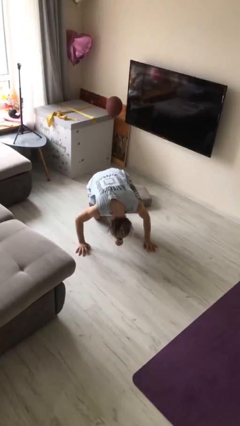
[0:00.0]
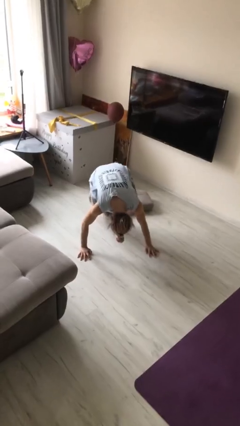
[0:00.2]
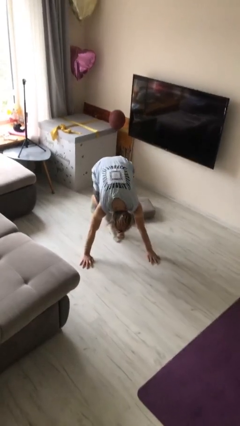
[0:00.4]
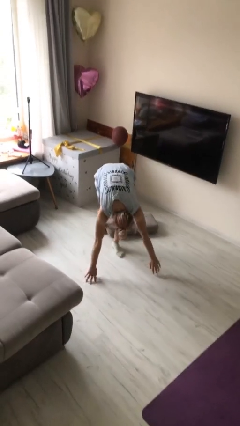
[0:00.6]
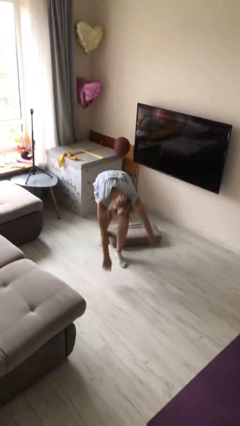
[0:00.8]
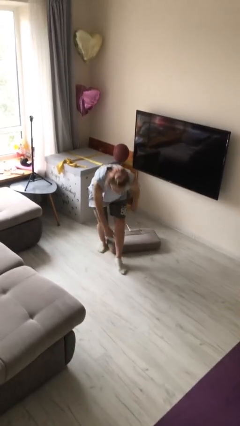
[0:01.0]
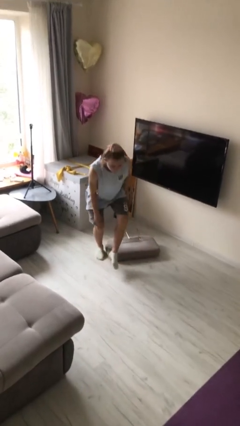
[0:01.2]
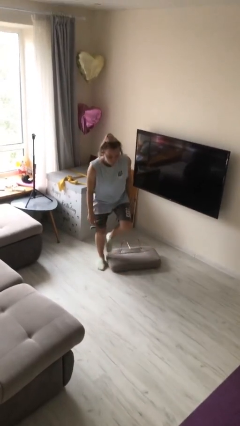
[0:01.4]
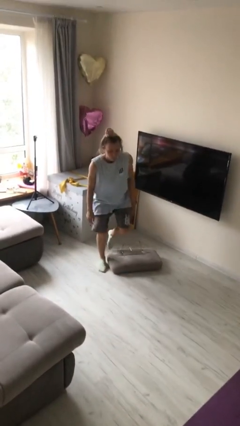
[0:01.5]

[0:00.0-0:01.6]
person stands up from floor

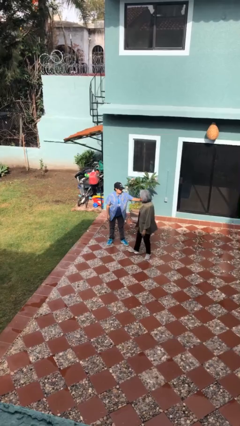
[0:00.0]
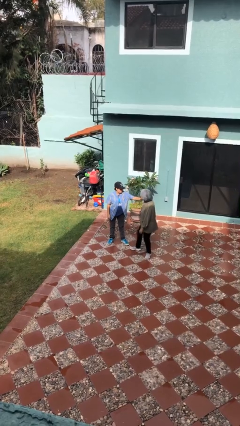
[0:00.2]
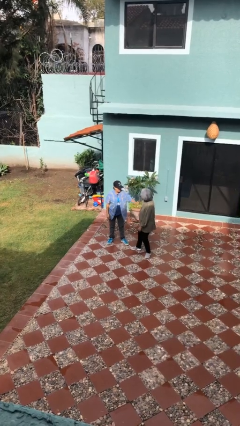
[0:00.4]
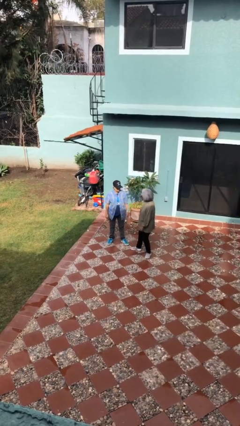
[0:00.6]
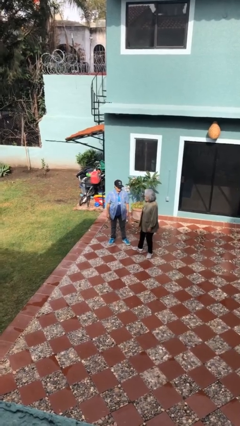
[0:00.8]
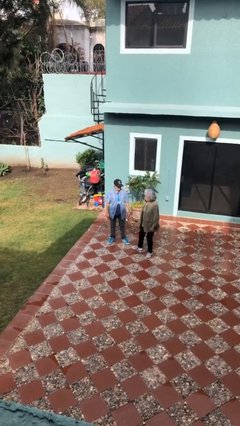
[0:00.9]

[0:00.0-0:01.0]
person spins person around

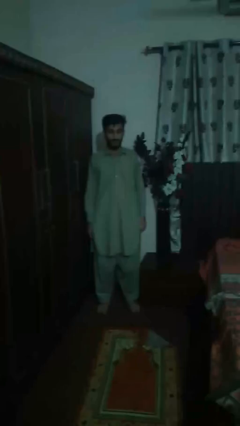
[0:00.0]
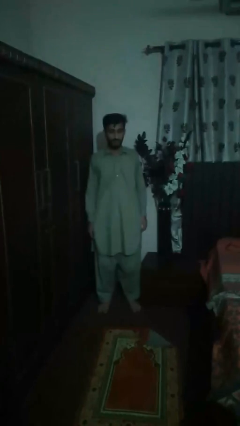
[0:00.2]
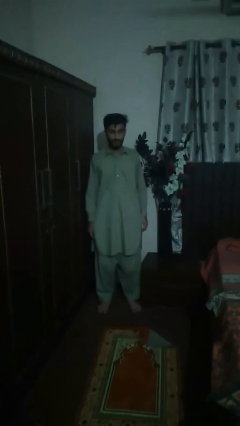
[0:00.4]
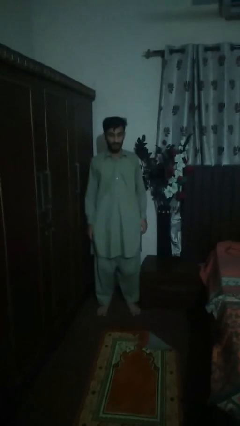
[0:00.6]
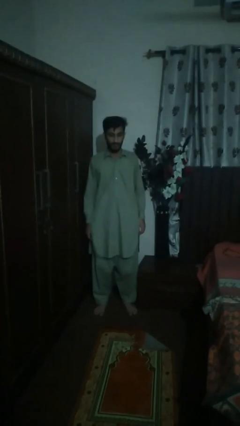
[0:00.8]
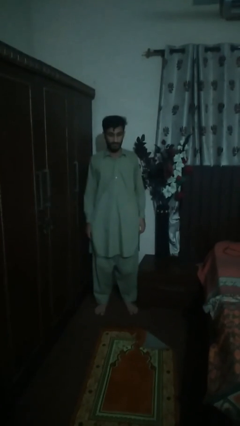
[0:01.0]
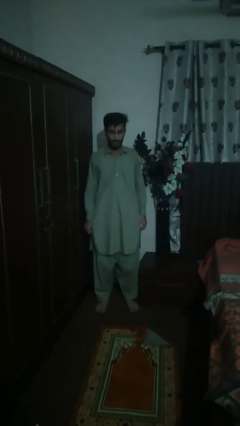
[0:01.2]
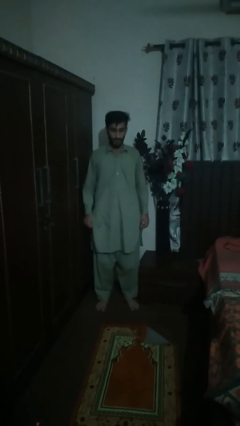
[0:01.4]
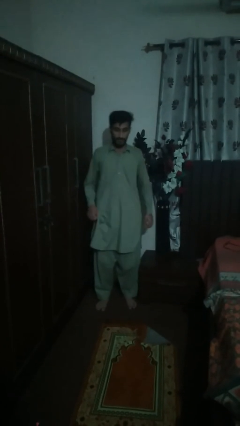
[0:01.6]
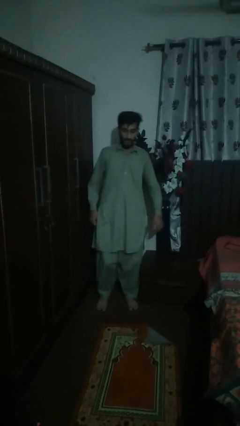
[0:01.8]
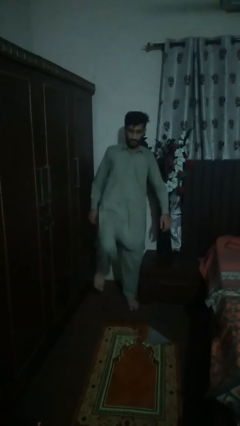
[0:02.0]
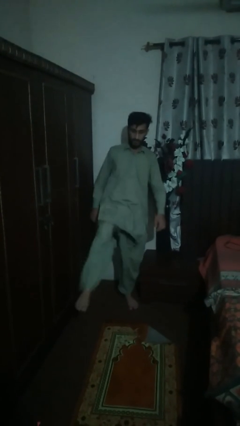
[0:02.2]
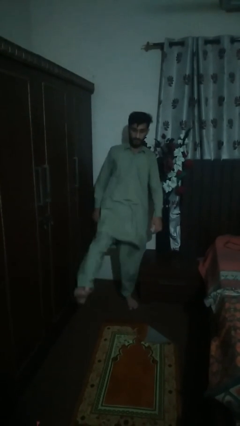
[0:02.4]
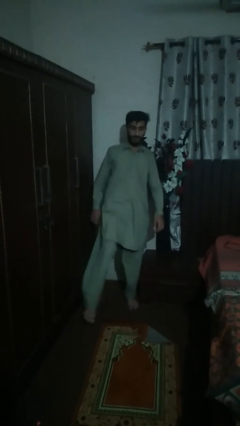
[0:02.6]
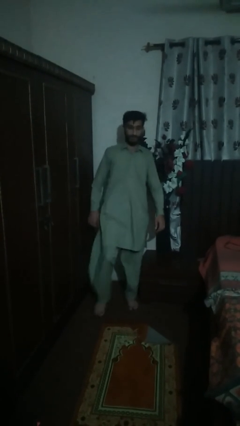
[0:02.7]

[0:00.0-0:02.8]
person karate kicks

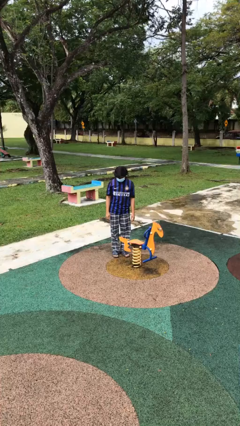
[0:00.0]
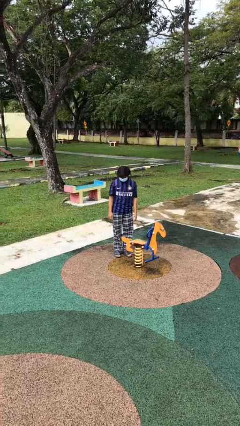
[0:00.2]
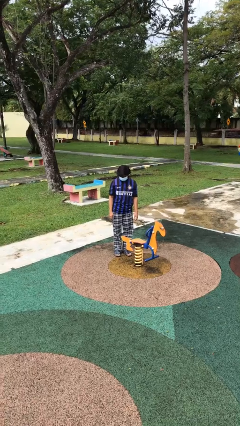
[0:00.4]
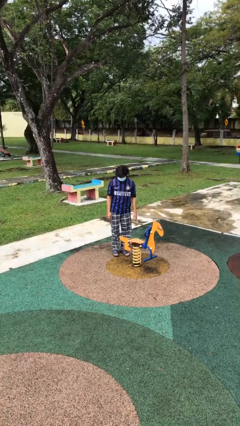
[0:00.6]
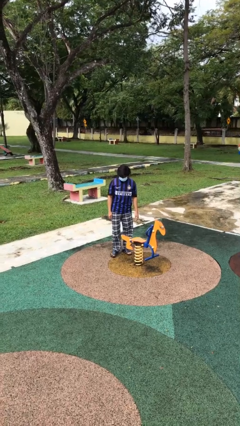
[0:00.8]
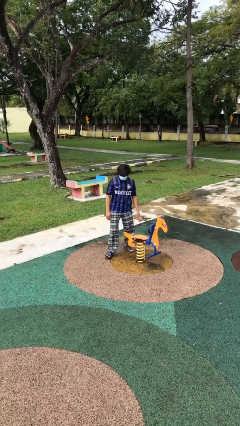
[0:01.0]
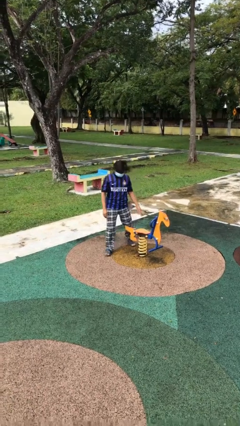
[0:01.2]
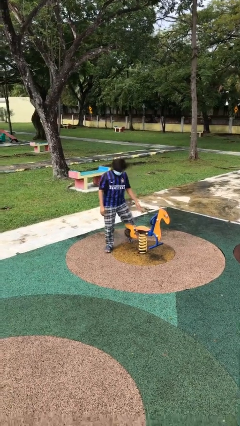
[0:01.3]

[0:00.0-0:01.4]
person trips on object on floor

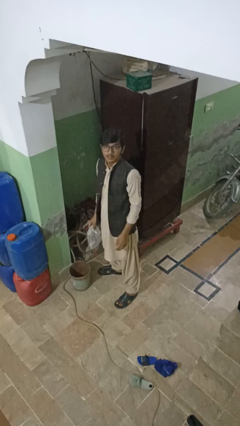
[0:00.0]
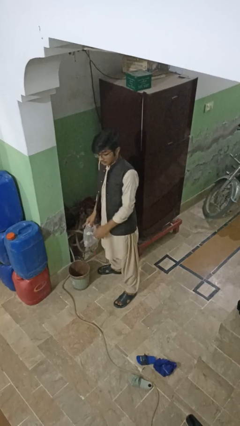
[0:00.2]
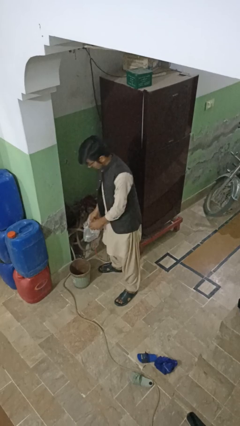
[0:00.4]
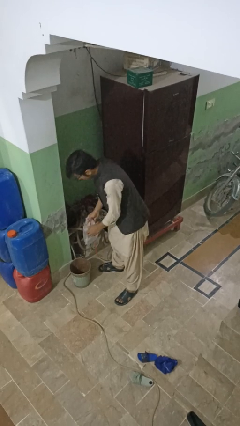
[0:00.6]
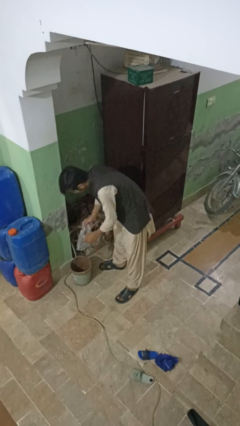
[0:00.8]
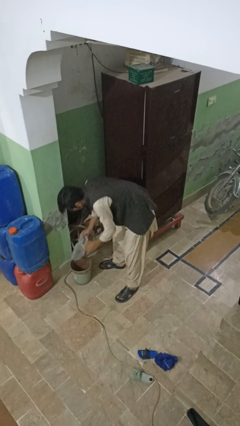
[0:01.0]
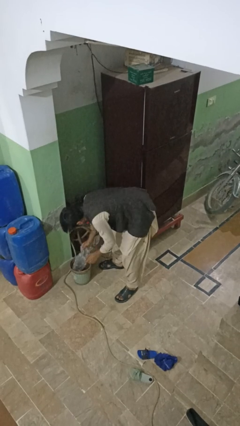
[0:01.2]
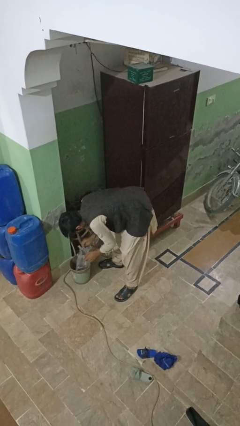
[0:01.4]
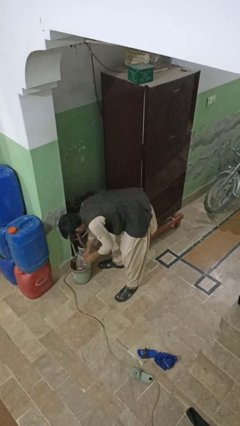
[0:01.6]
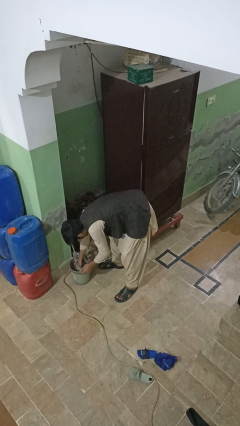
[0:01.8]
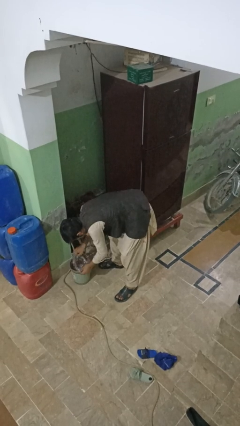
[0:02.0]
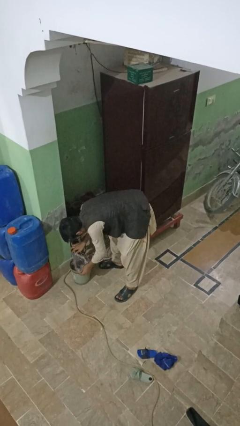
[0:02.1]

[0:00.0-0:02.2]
person inserts trashbag into trashcan

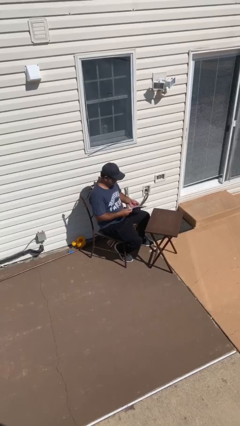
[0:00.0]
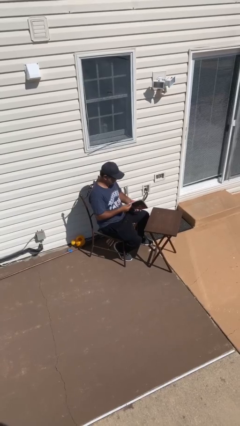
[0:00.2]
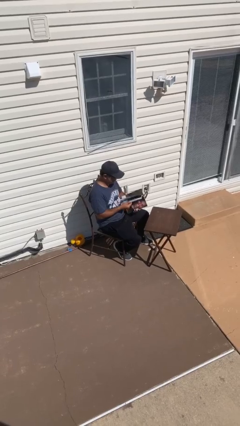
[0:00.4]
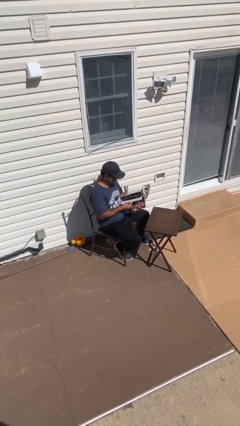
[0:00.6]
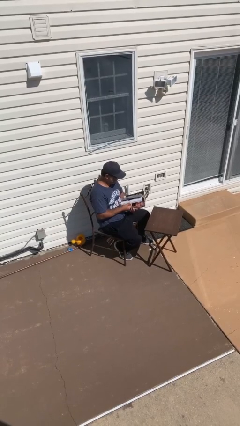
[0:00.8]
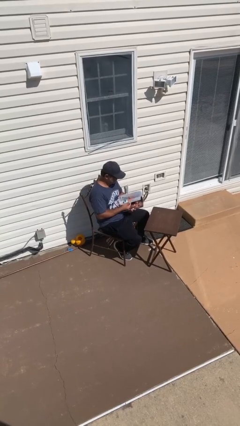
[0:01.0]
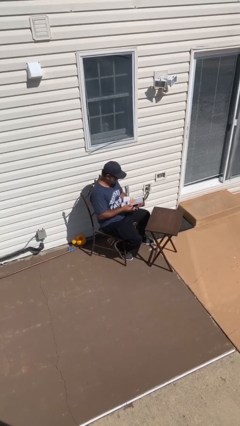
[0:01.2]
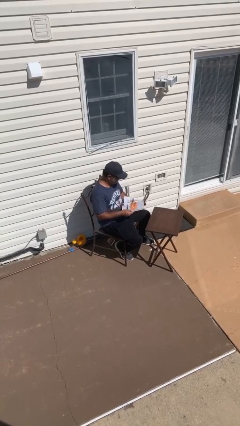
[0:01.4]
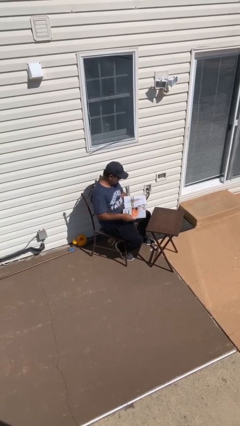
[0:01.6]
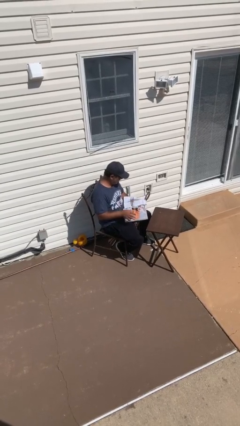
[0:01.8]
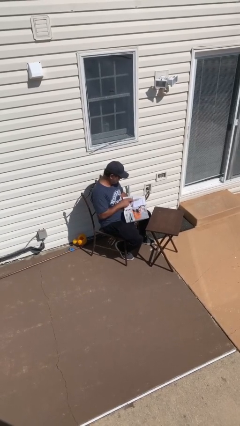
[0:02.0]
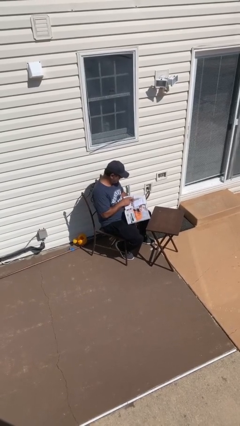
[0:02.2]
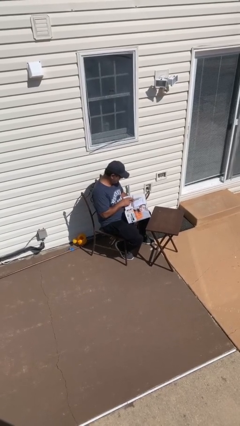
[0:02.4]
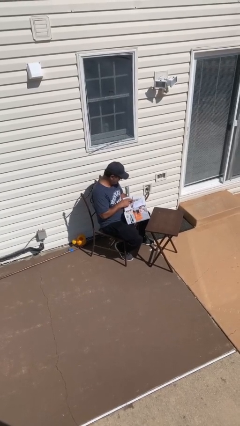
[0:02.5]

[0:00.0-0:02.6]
person reads document

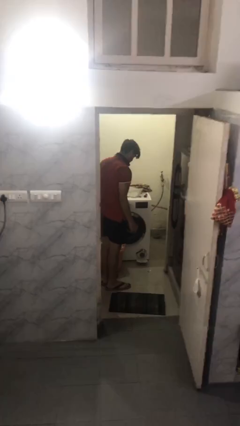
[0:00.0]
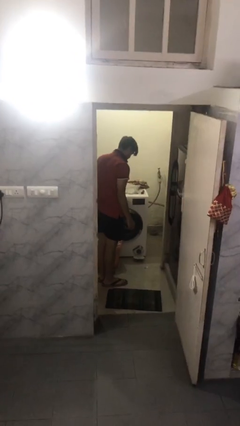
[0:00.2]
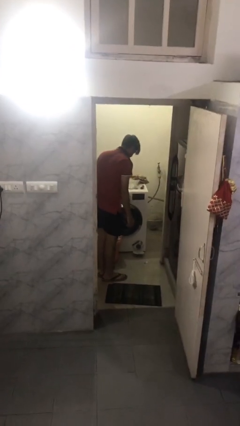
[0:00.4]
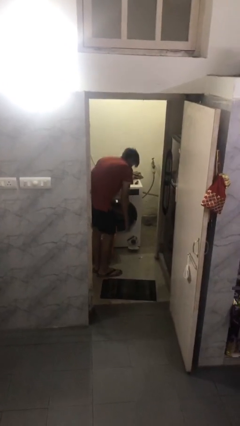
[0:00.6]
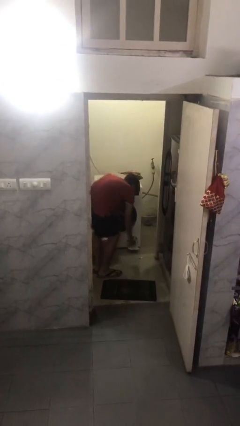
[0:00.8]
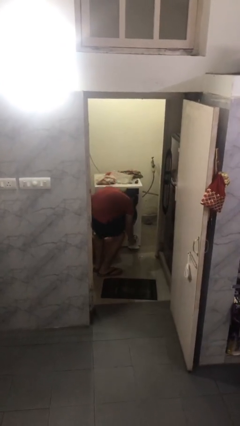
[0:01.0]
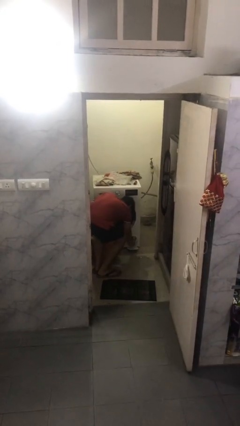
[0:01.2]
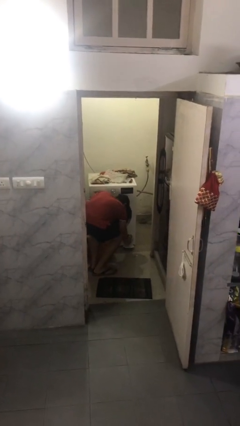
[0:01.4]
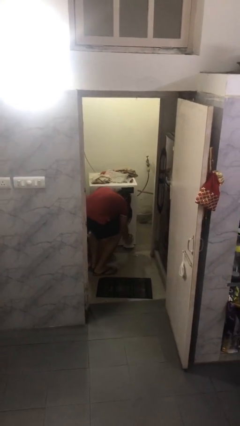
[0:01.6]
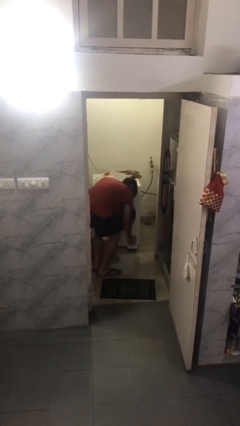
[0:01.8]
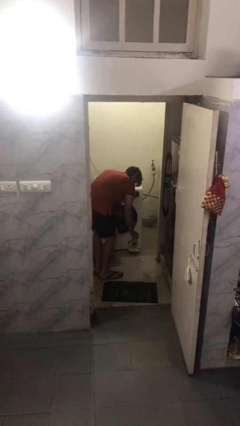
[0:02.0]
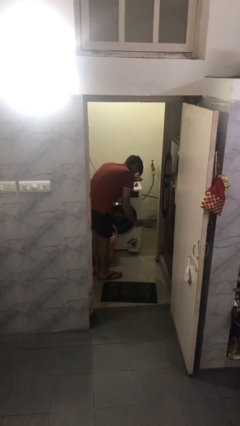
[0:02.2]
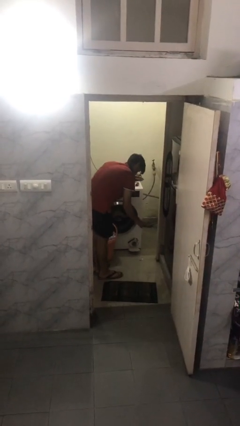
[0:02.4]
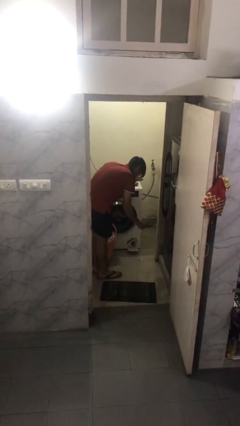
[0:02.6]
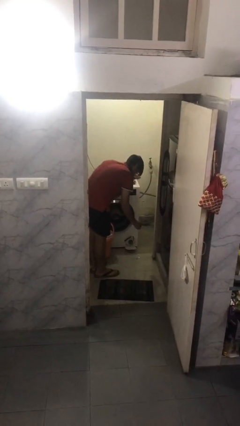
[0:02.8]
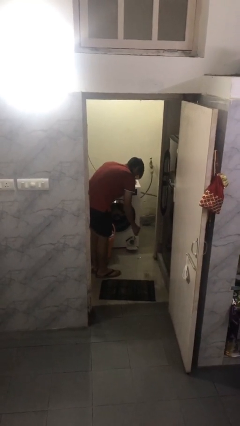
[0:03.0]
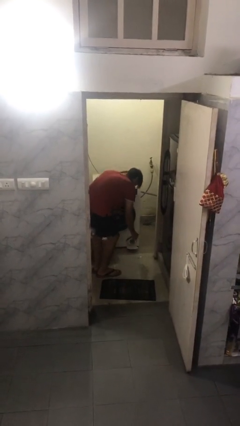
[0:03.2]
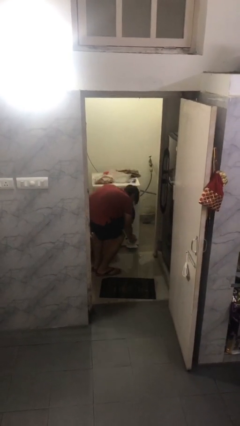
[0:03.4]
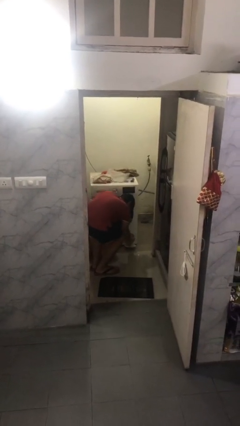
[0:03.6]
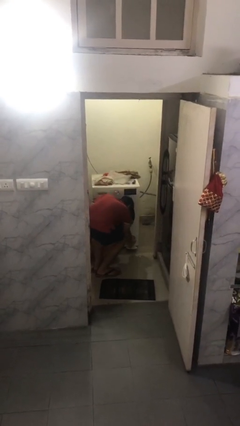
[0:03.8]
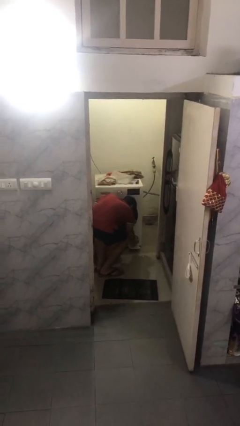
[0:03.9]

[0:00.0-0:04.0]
person cleans dryer lint trap

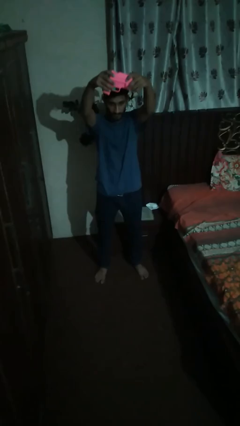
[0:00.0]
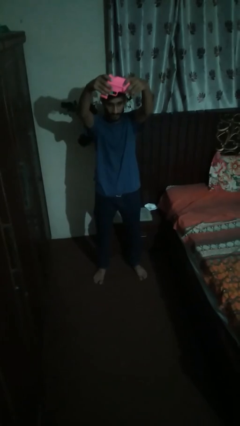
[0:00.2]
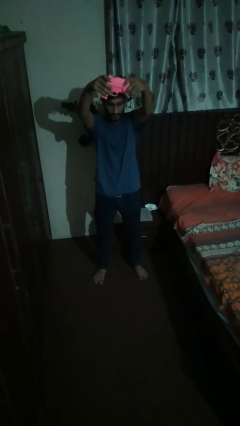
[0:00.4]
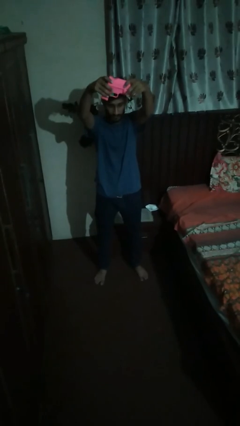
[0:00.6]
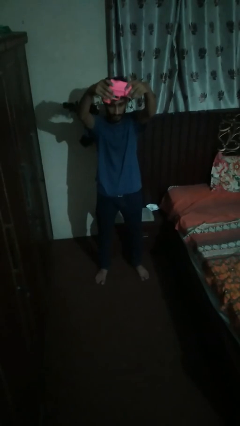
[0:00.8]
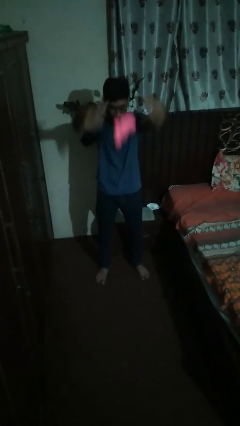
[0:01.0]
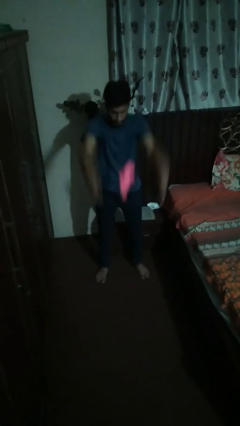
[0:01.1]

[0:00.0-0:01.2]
person drops object
